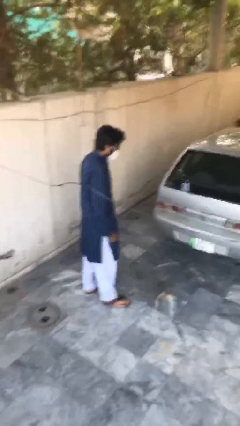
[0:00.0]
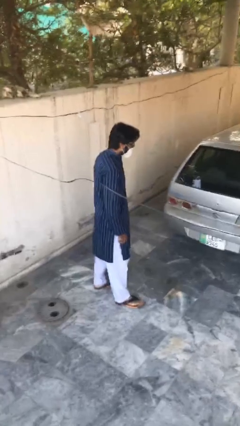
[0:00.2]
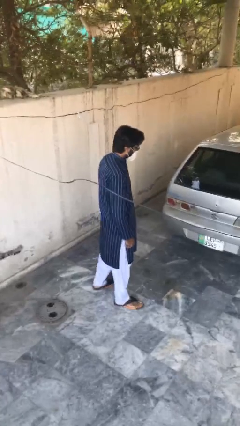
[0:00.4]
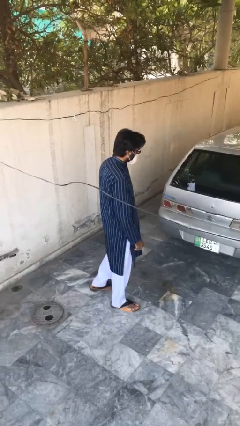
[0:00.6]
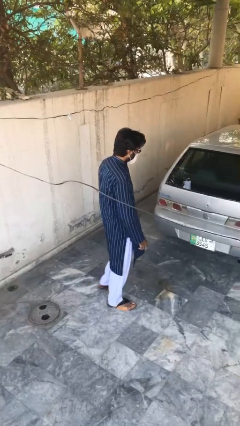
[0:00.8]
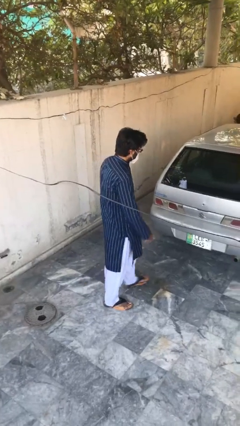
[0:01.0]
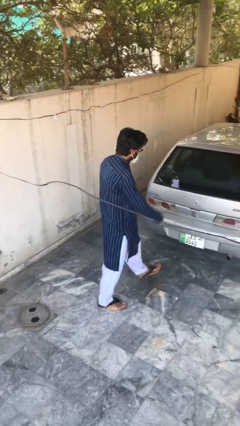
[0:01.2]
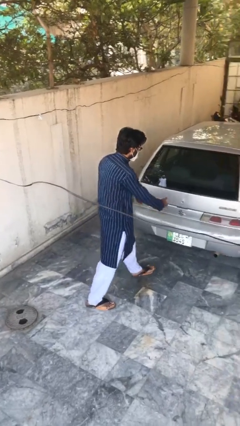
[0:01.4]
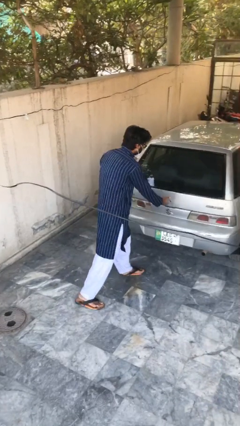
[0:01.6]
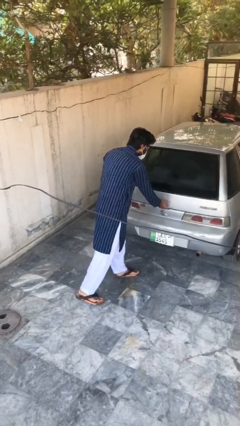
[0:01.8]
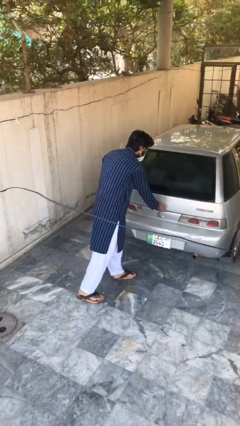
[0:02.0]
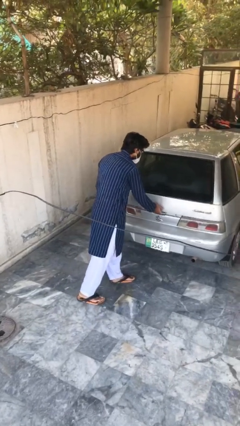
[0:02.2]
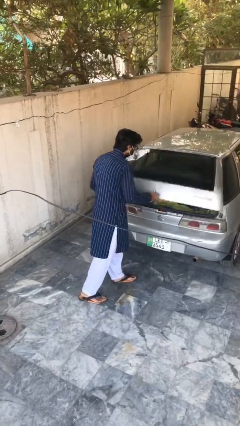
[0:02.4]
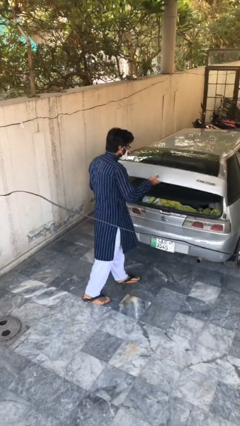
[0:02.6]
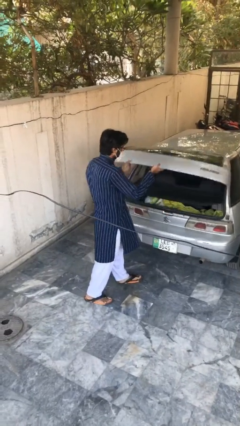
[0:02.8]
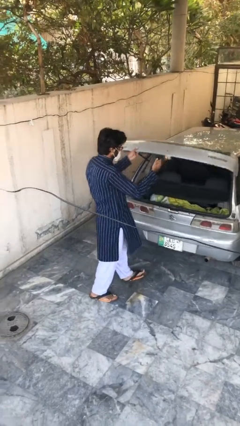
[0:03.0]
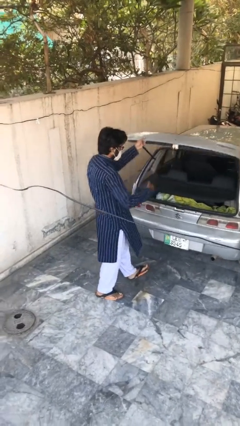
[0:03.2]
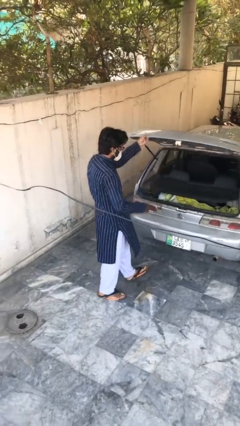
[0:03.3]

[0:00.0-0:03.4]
person opens car trunk

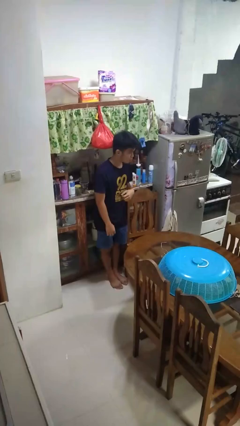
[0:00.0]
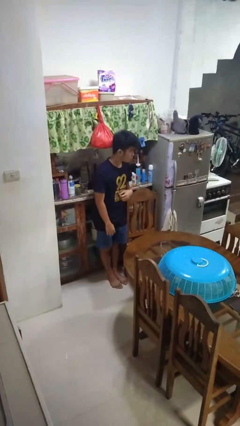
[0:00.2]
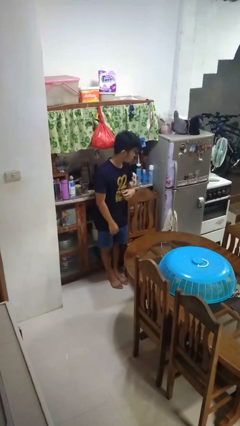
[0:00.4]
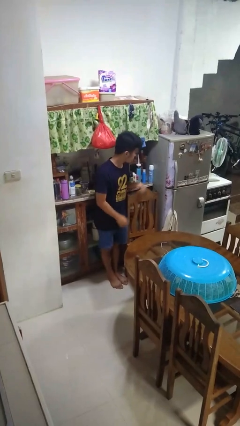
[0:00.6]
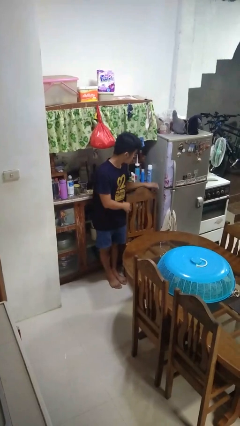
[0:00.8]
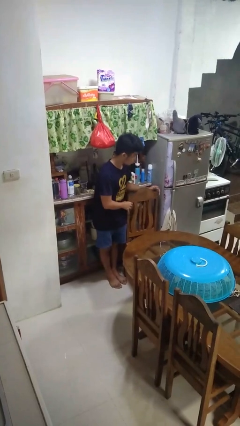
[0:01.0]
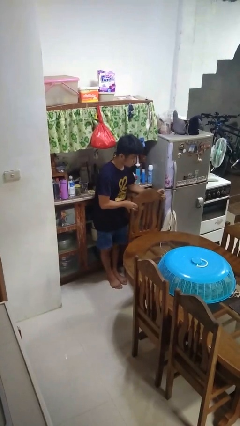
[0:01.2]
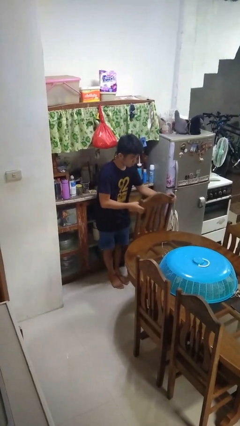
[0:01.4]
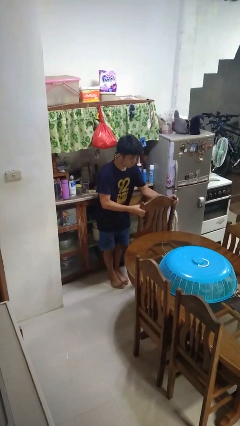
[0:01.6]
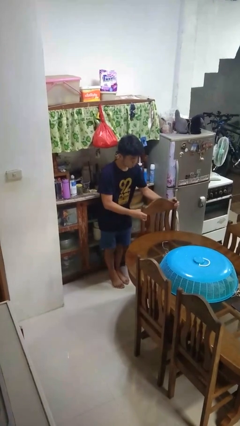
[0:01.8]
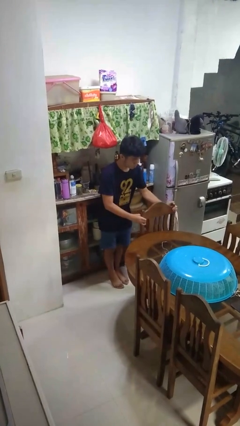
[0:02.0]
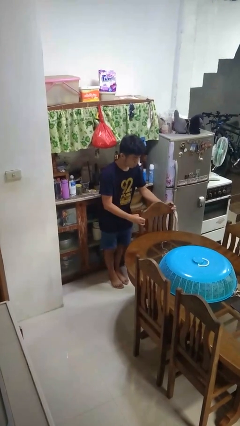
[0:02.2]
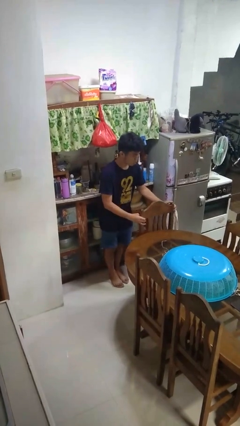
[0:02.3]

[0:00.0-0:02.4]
person pushes in chair

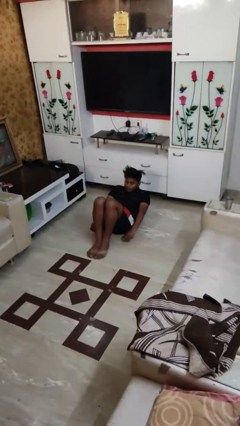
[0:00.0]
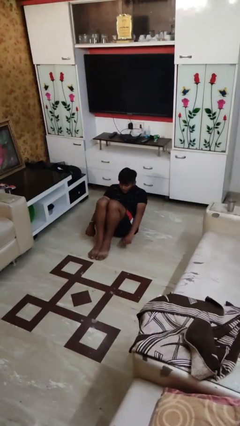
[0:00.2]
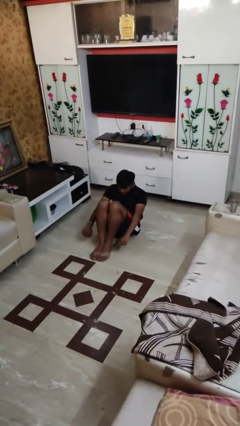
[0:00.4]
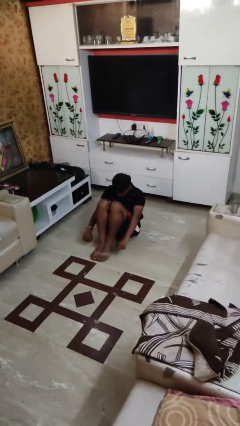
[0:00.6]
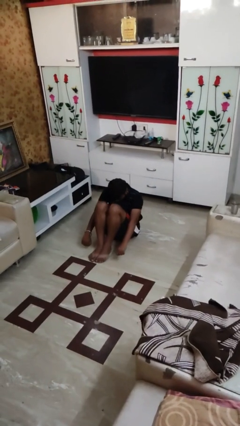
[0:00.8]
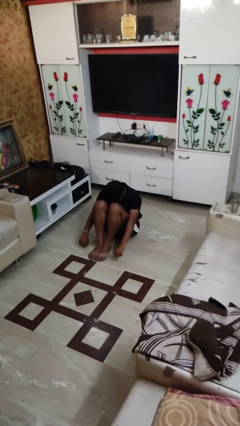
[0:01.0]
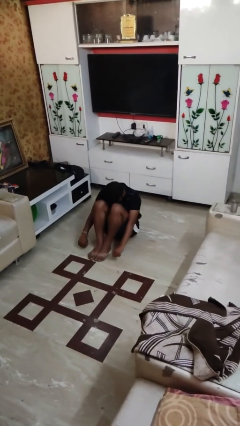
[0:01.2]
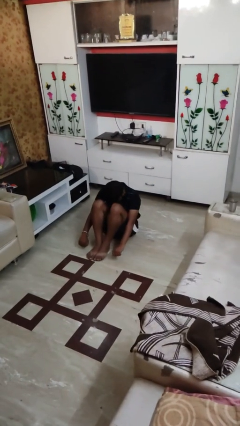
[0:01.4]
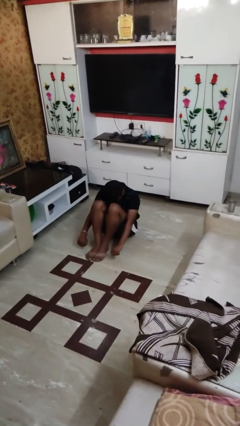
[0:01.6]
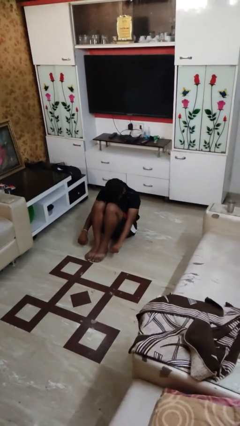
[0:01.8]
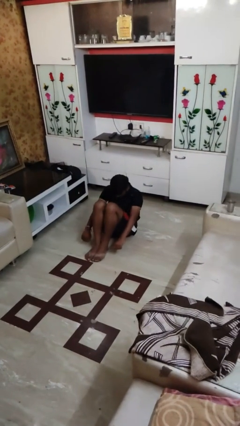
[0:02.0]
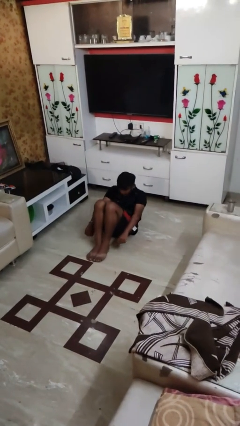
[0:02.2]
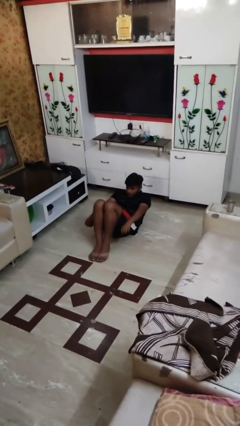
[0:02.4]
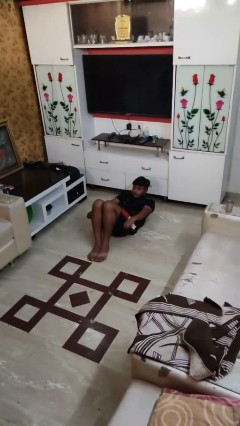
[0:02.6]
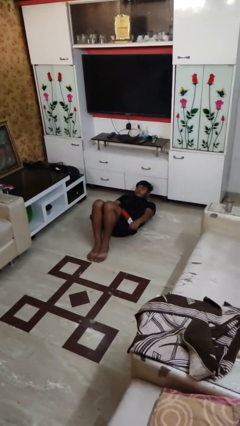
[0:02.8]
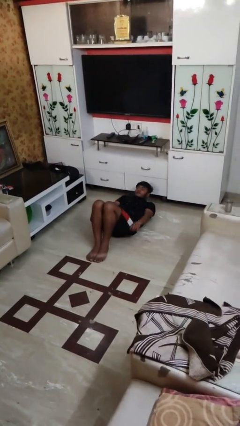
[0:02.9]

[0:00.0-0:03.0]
person exercises with situp

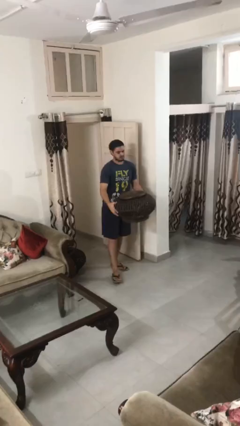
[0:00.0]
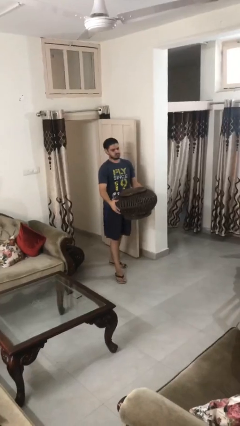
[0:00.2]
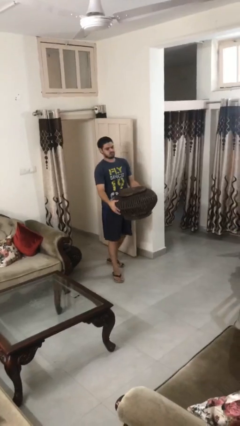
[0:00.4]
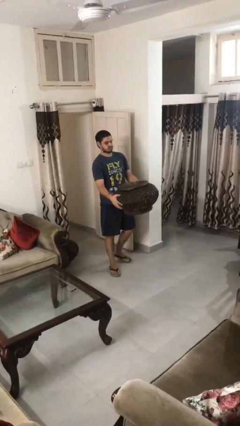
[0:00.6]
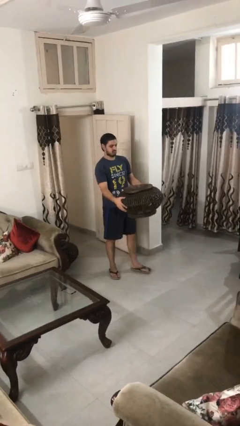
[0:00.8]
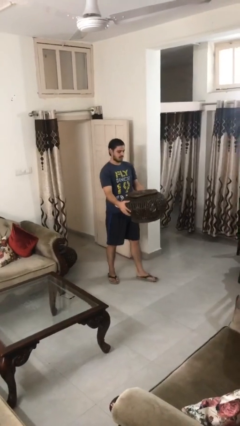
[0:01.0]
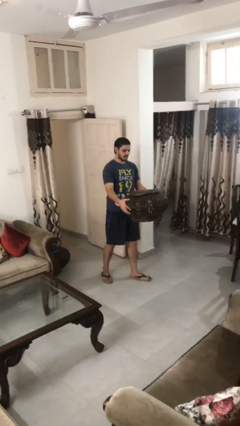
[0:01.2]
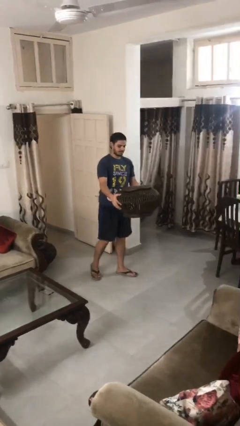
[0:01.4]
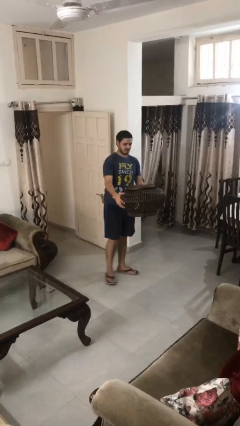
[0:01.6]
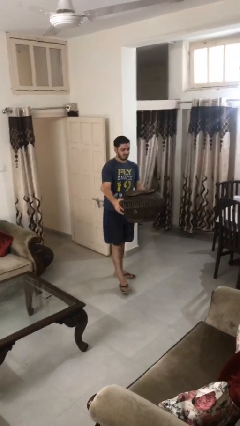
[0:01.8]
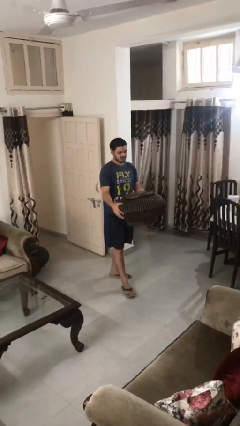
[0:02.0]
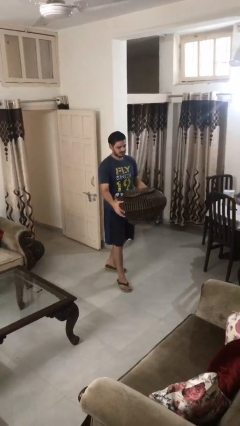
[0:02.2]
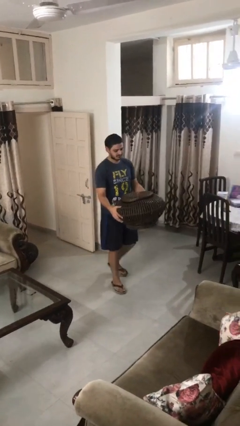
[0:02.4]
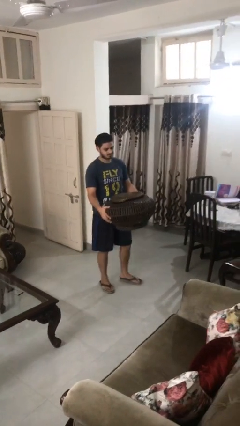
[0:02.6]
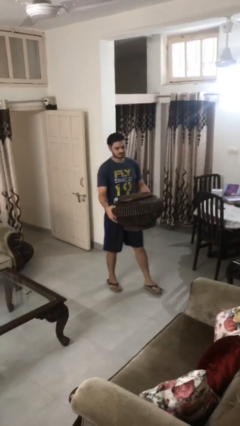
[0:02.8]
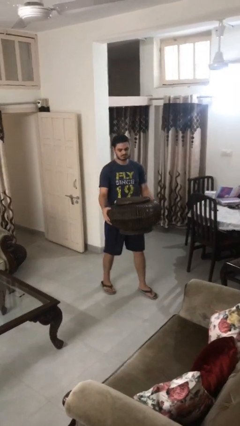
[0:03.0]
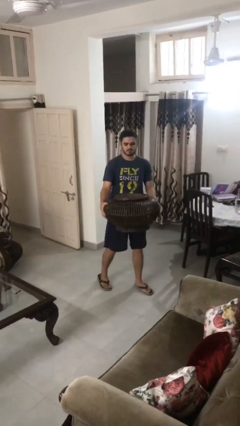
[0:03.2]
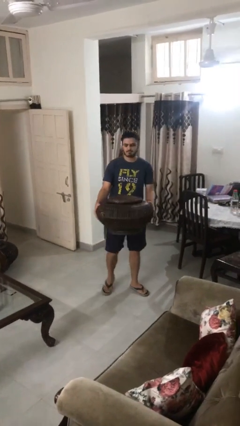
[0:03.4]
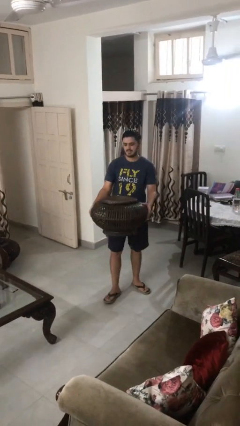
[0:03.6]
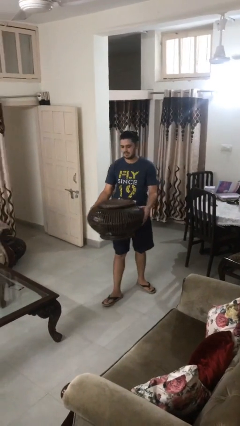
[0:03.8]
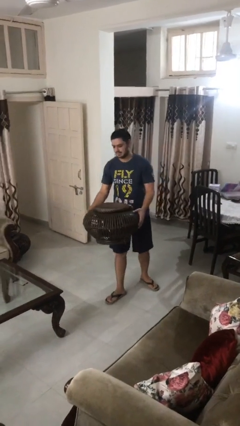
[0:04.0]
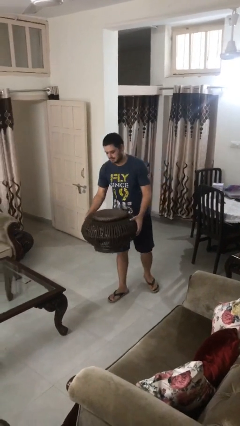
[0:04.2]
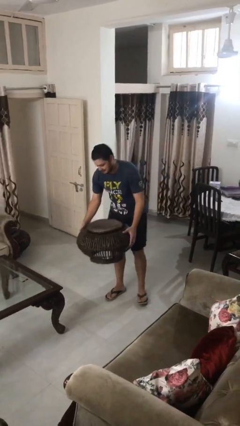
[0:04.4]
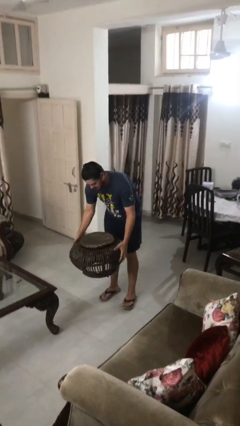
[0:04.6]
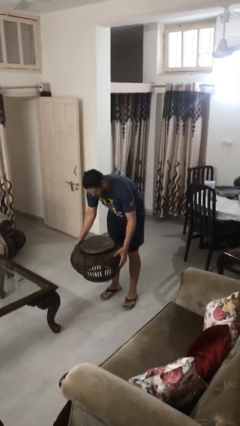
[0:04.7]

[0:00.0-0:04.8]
person carries heavy object

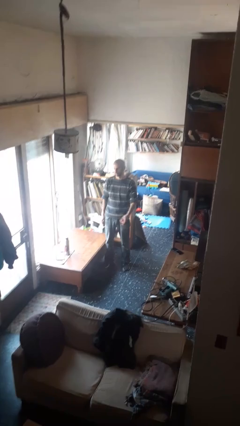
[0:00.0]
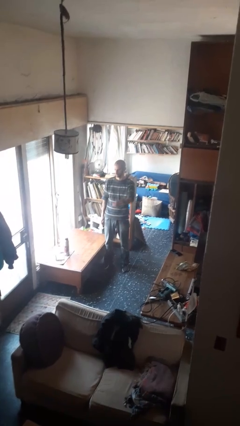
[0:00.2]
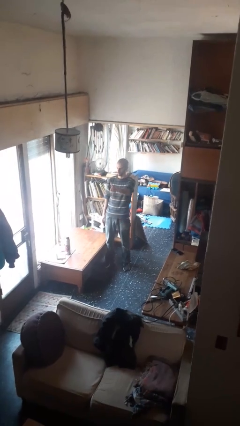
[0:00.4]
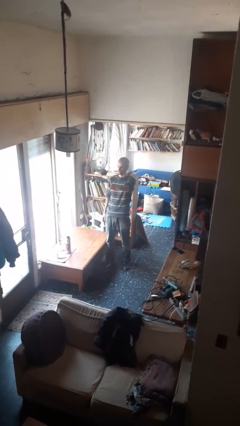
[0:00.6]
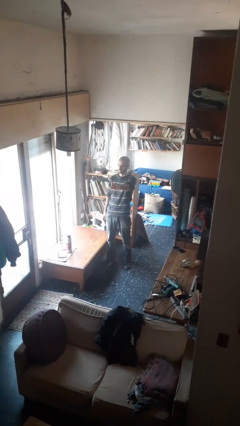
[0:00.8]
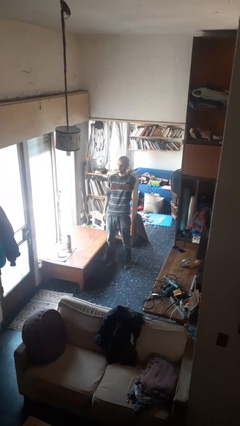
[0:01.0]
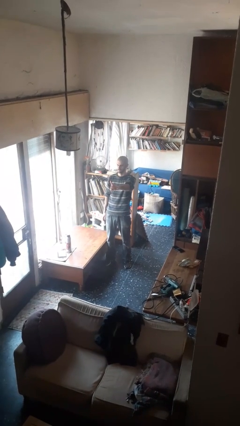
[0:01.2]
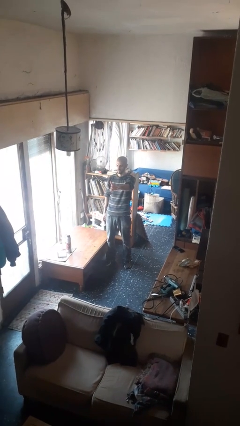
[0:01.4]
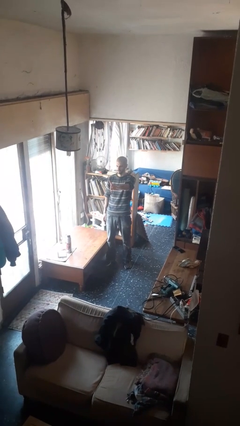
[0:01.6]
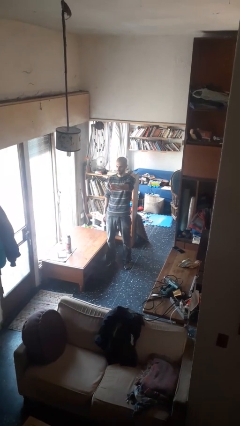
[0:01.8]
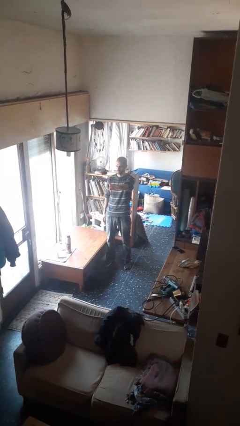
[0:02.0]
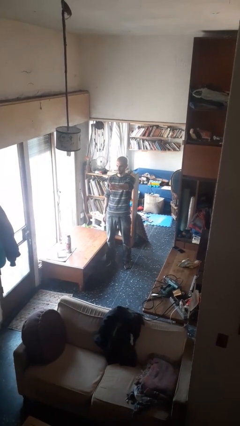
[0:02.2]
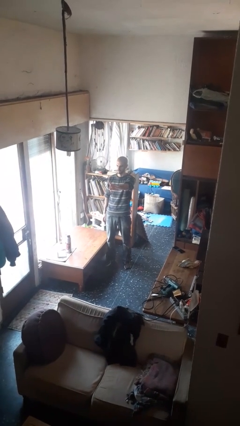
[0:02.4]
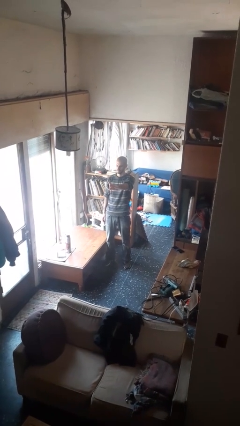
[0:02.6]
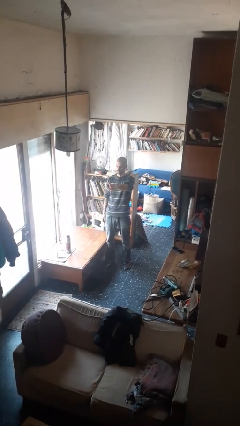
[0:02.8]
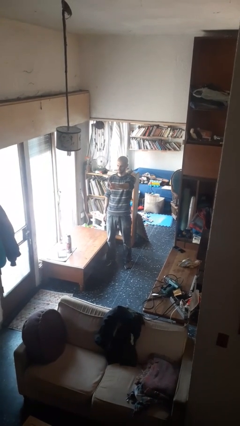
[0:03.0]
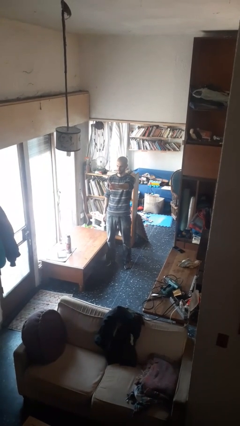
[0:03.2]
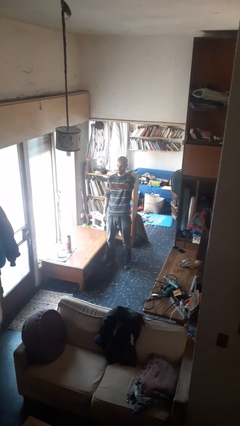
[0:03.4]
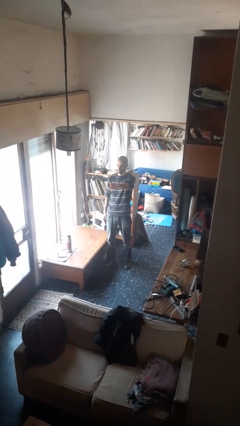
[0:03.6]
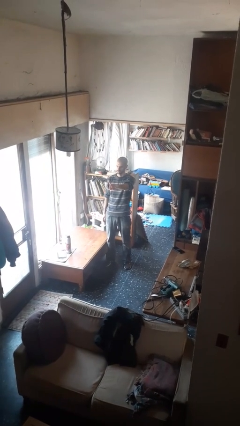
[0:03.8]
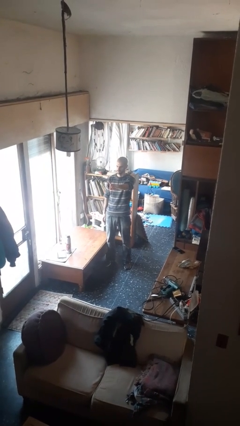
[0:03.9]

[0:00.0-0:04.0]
person gestures number one
